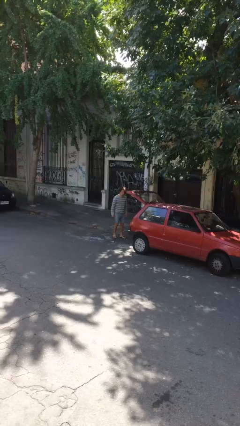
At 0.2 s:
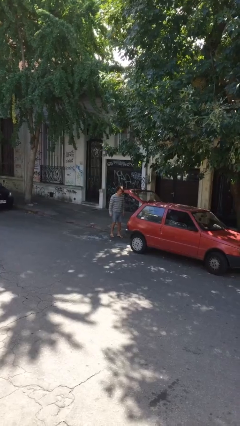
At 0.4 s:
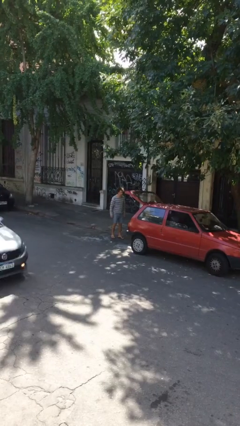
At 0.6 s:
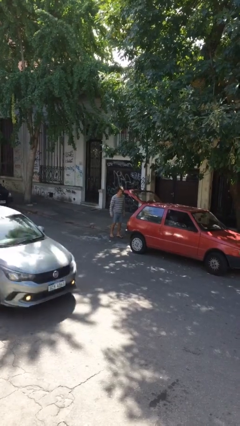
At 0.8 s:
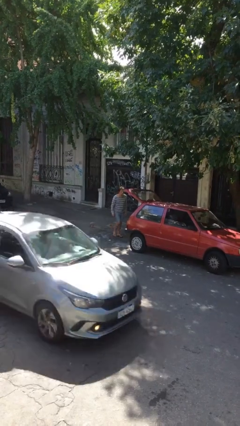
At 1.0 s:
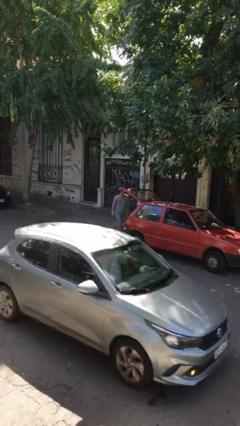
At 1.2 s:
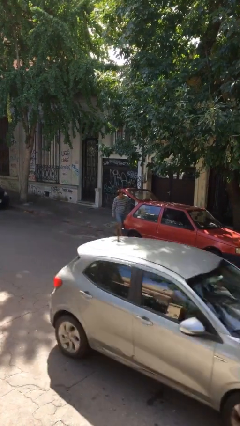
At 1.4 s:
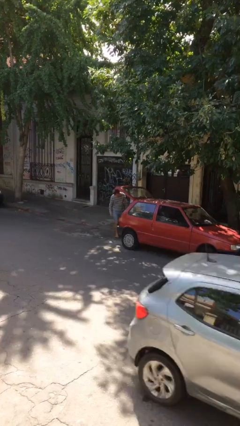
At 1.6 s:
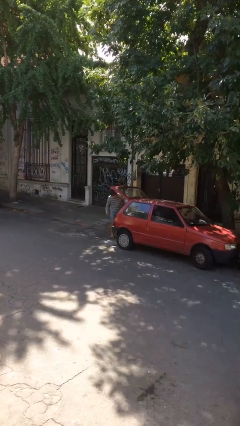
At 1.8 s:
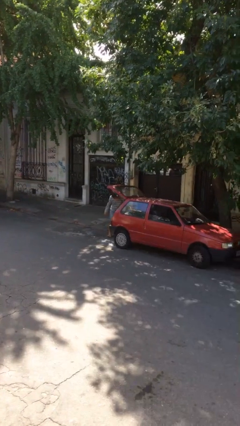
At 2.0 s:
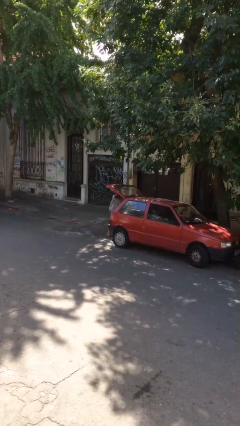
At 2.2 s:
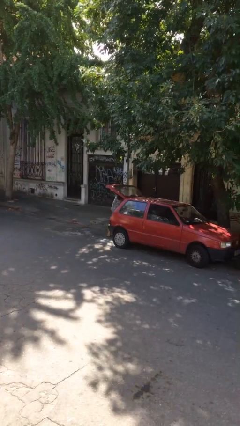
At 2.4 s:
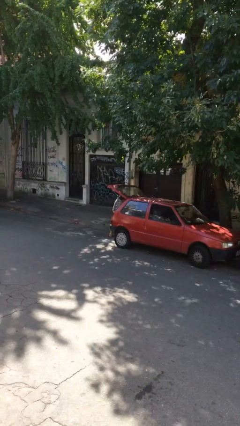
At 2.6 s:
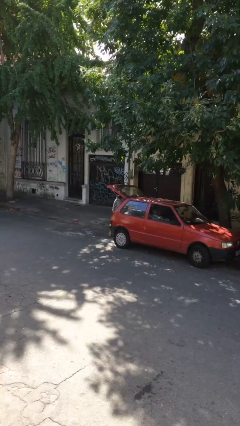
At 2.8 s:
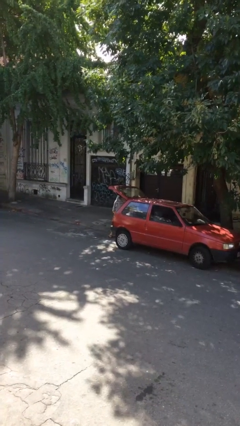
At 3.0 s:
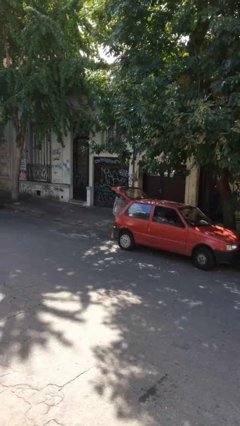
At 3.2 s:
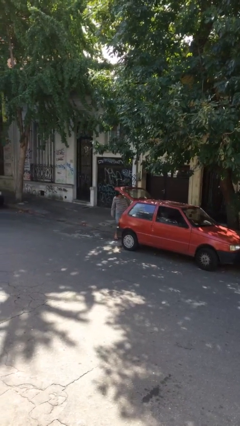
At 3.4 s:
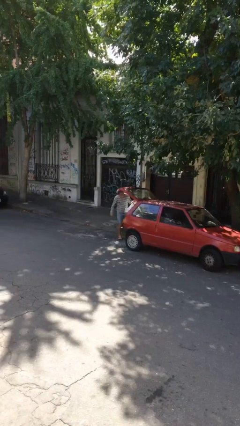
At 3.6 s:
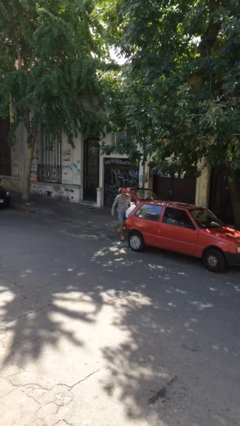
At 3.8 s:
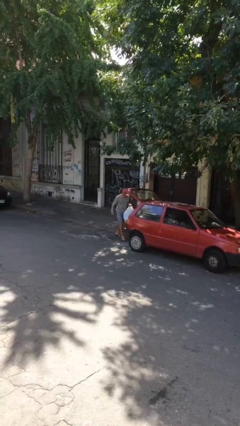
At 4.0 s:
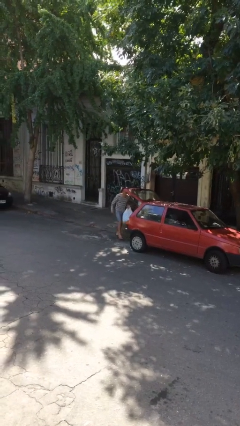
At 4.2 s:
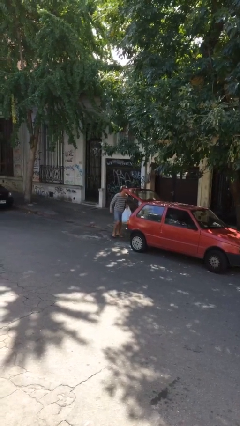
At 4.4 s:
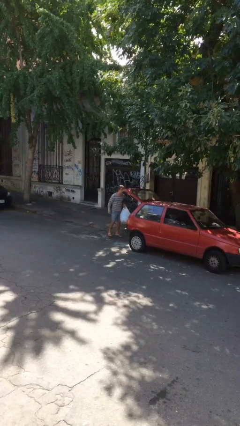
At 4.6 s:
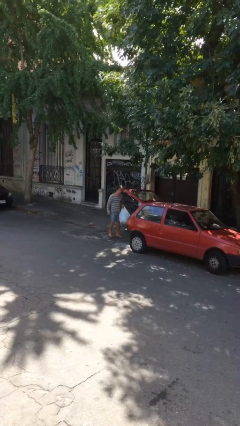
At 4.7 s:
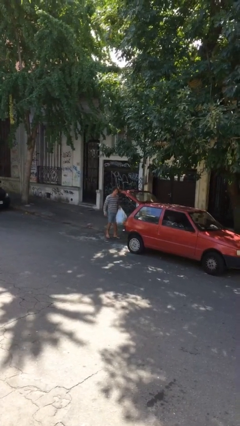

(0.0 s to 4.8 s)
person unloads car

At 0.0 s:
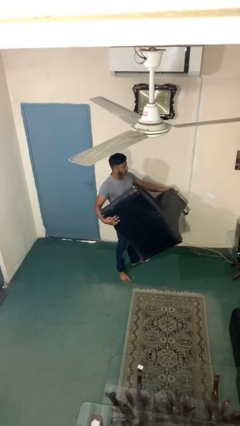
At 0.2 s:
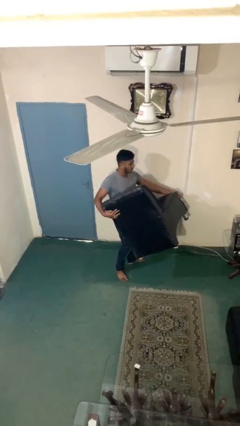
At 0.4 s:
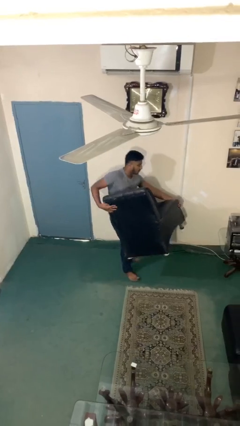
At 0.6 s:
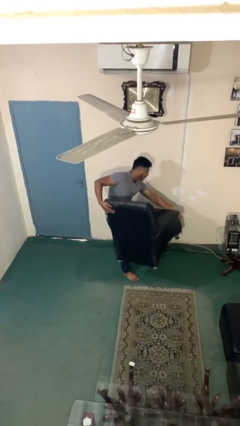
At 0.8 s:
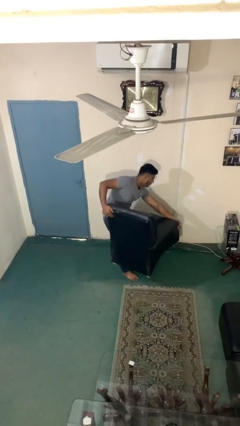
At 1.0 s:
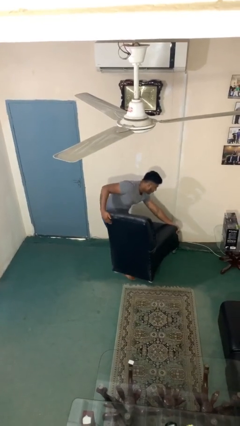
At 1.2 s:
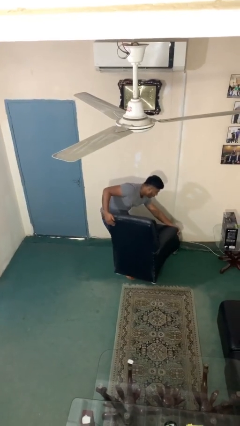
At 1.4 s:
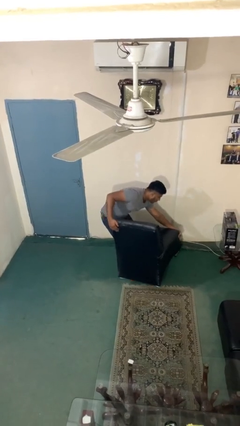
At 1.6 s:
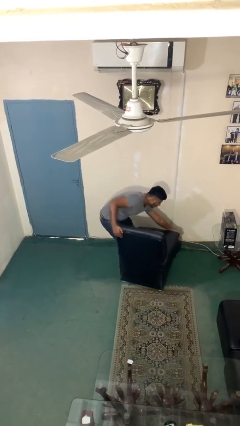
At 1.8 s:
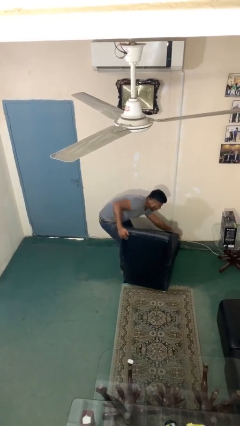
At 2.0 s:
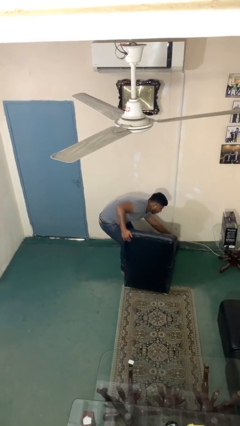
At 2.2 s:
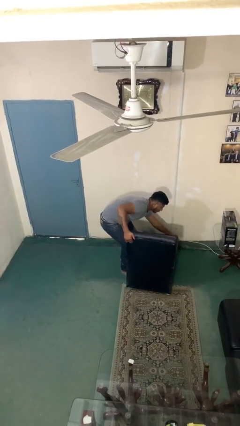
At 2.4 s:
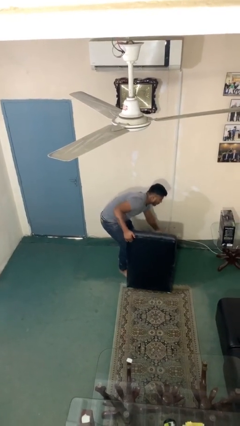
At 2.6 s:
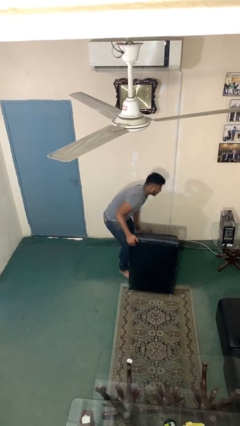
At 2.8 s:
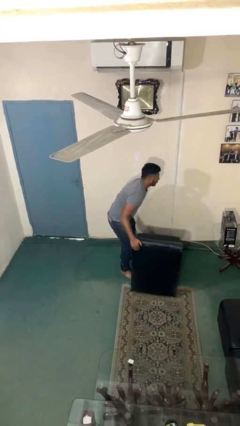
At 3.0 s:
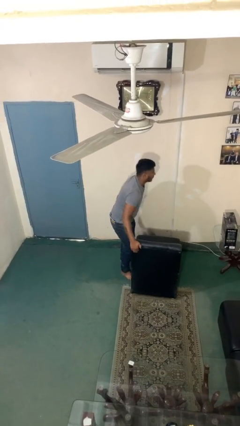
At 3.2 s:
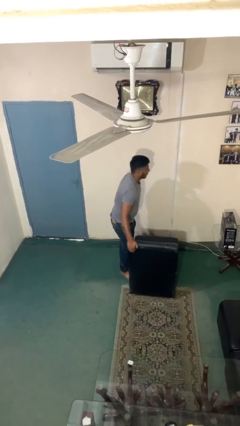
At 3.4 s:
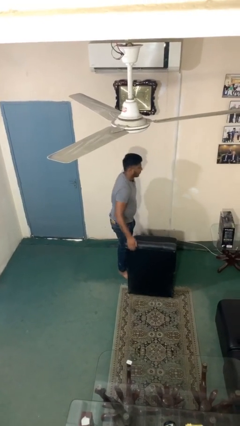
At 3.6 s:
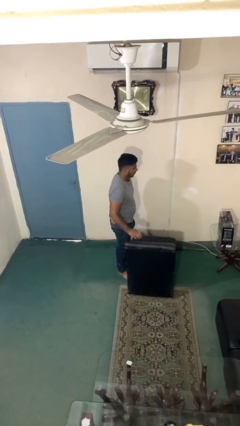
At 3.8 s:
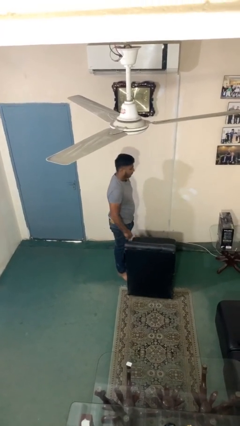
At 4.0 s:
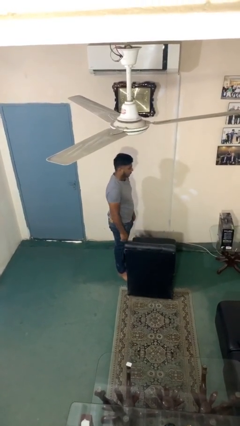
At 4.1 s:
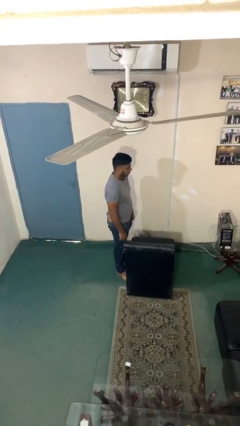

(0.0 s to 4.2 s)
person puts down object on floor

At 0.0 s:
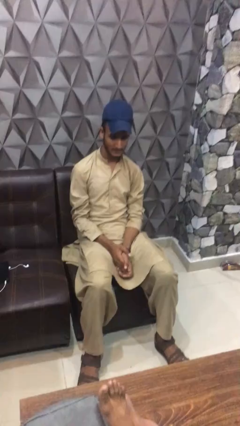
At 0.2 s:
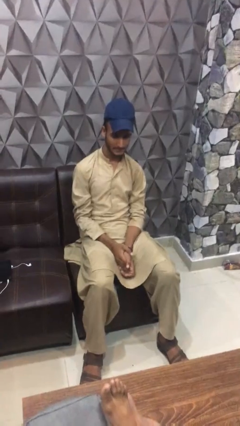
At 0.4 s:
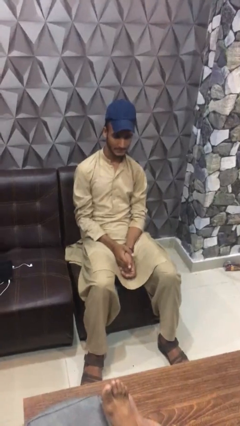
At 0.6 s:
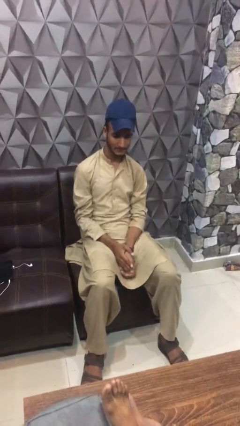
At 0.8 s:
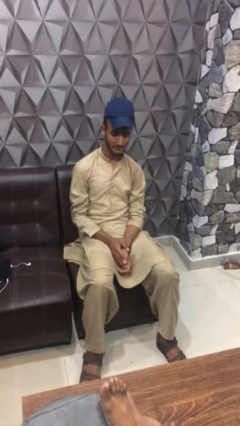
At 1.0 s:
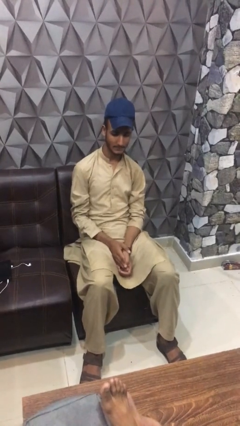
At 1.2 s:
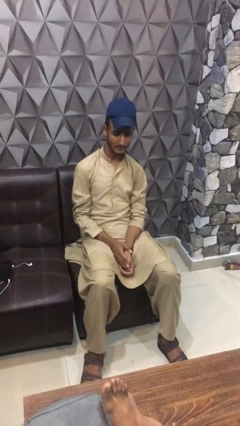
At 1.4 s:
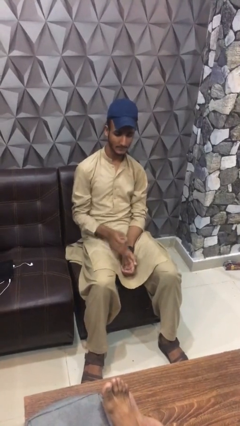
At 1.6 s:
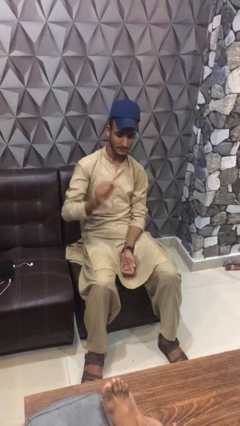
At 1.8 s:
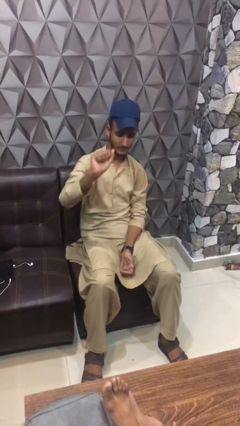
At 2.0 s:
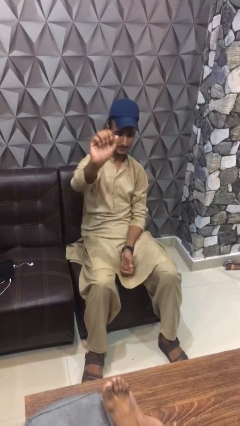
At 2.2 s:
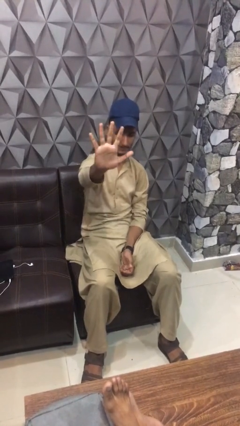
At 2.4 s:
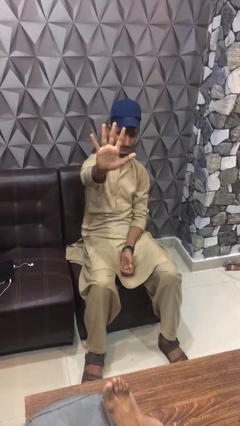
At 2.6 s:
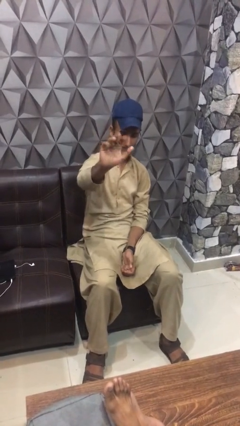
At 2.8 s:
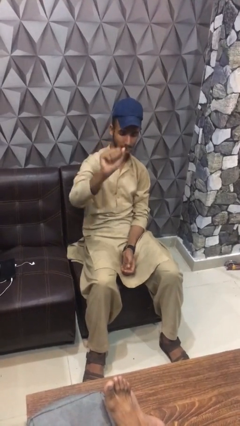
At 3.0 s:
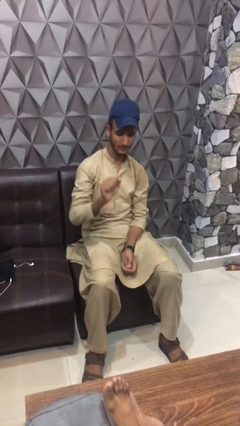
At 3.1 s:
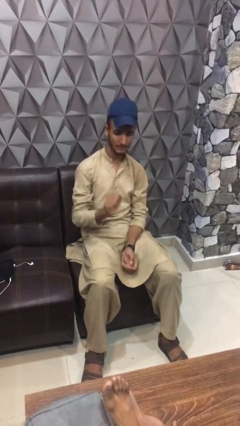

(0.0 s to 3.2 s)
person gestures number five

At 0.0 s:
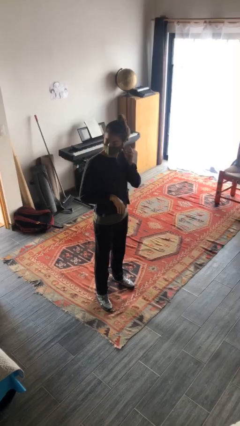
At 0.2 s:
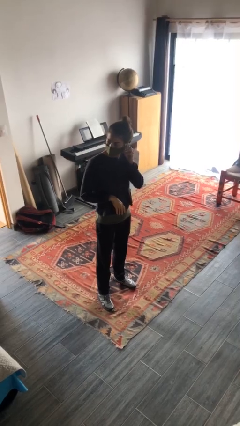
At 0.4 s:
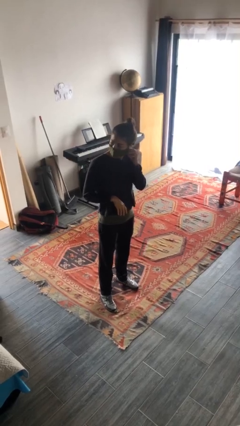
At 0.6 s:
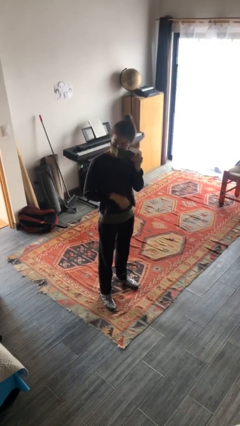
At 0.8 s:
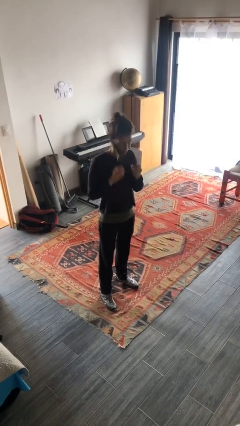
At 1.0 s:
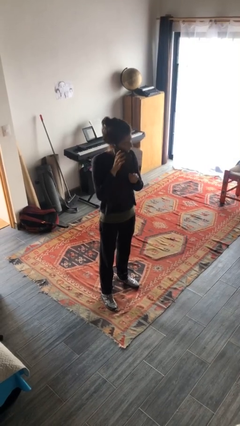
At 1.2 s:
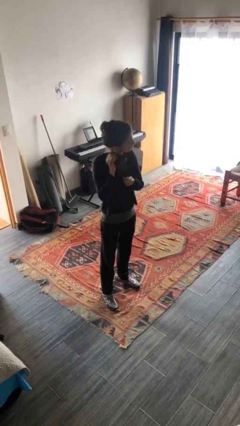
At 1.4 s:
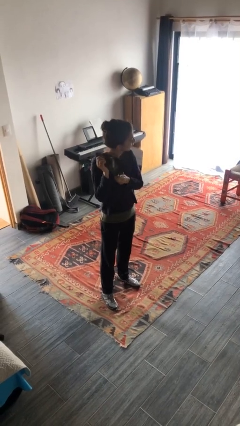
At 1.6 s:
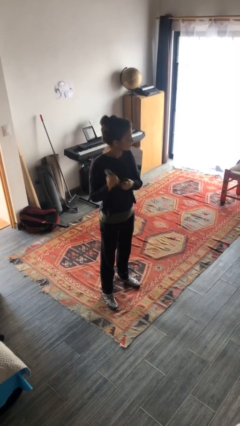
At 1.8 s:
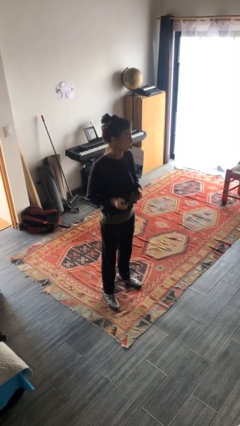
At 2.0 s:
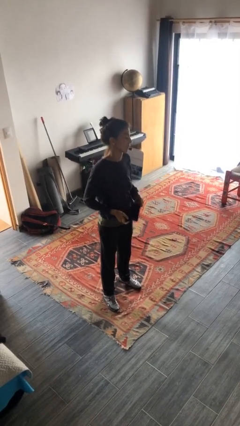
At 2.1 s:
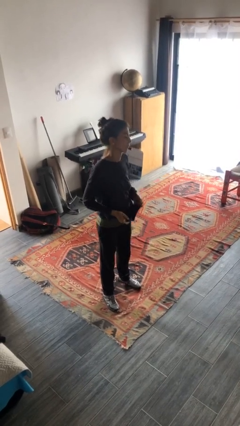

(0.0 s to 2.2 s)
person takes off facemask

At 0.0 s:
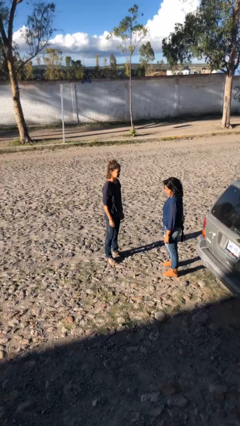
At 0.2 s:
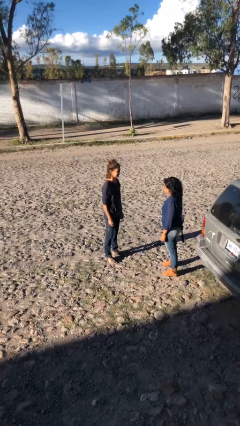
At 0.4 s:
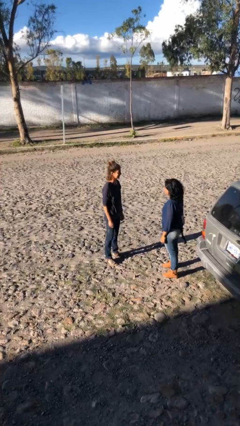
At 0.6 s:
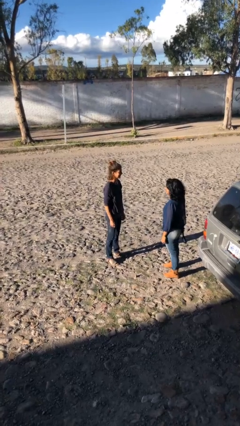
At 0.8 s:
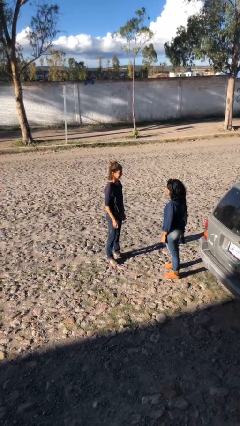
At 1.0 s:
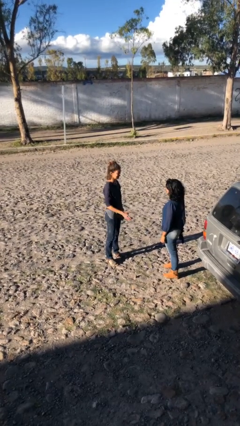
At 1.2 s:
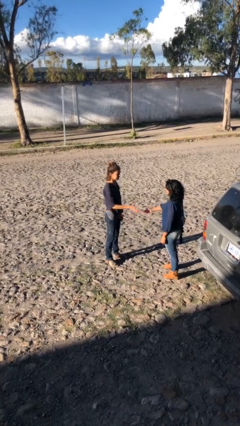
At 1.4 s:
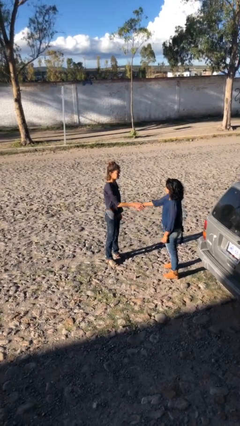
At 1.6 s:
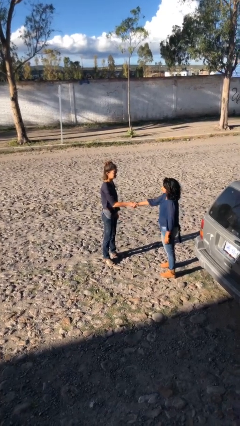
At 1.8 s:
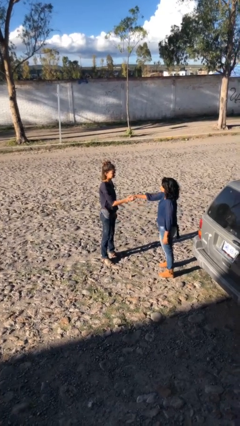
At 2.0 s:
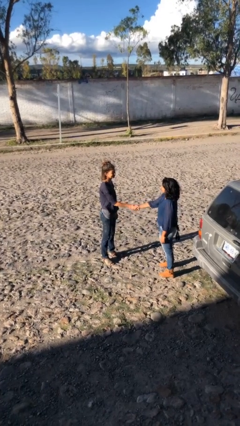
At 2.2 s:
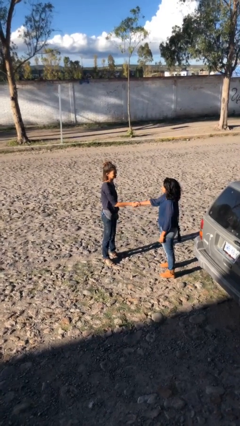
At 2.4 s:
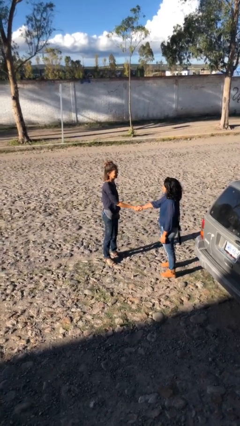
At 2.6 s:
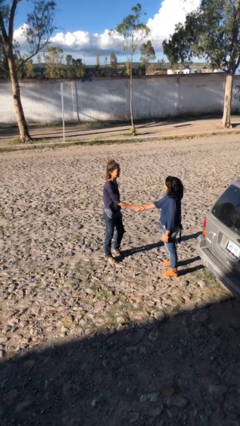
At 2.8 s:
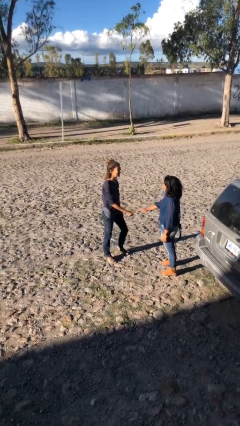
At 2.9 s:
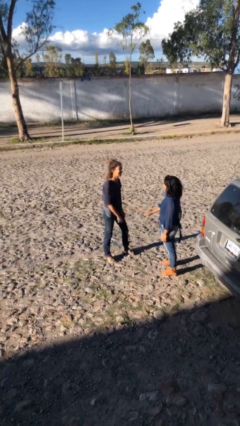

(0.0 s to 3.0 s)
person shakes hand
